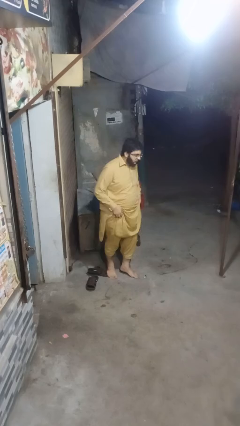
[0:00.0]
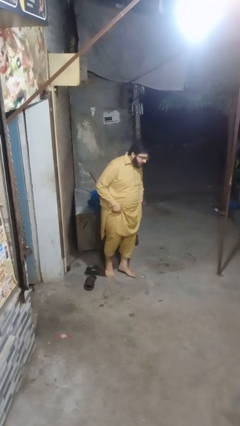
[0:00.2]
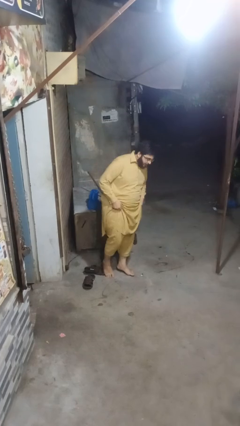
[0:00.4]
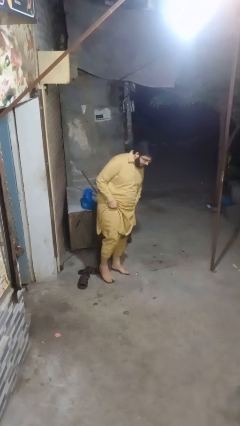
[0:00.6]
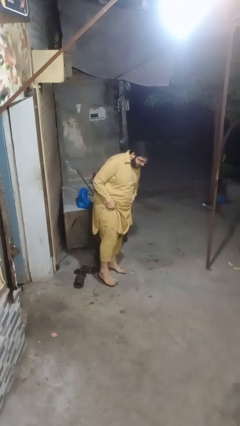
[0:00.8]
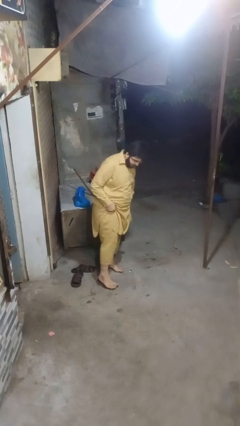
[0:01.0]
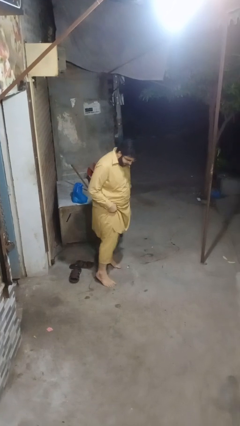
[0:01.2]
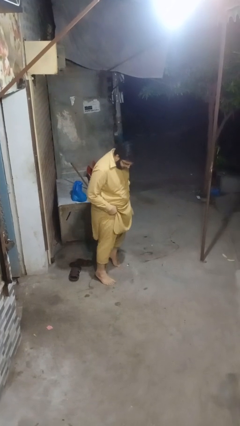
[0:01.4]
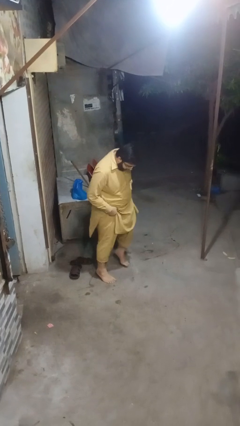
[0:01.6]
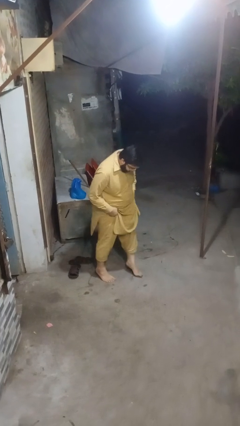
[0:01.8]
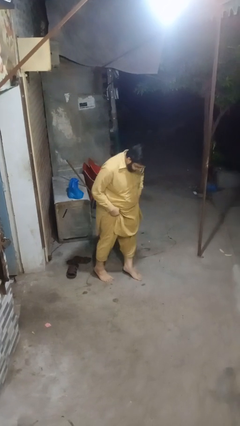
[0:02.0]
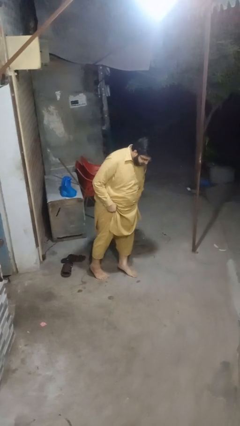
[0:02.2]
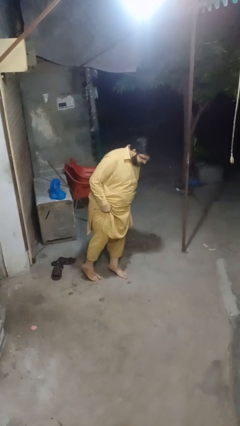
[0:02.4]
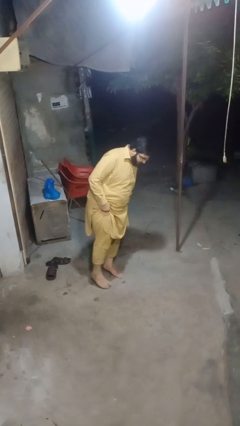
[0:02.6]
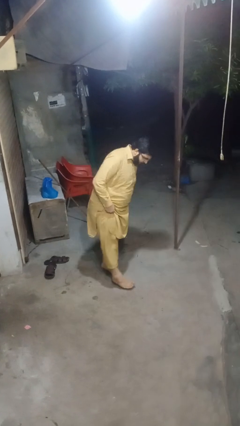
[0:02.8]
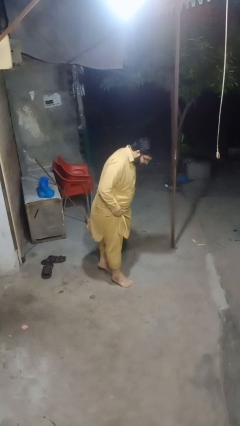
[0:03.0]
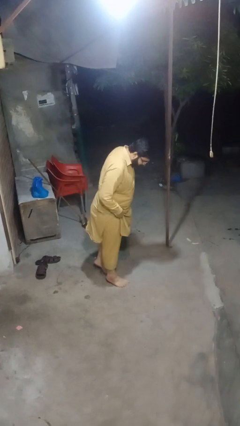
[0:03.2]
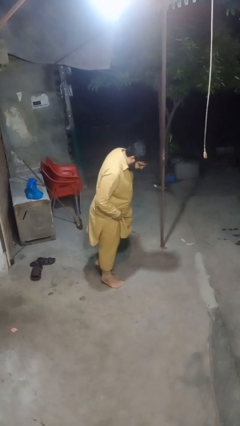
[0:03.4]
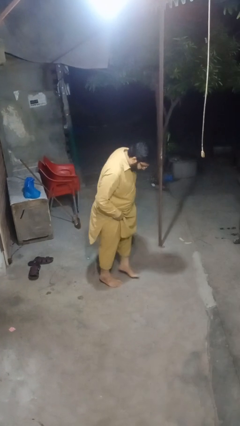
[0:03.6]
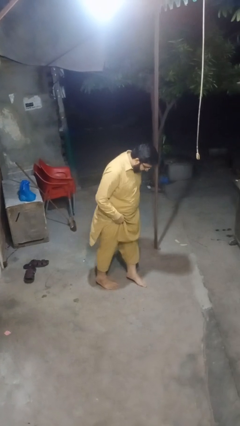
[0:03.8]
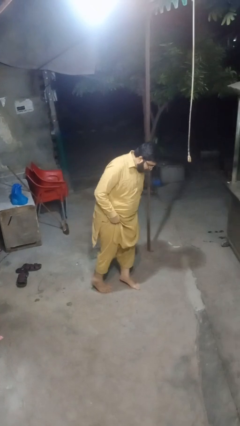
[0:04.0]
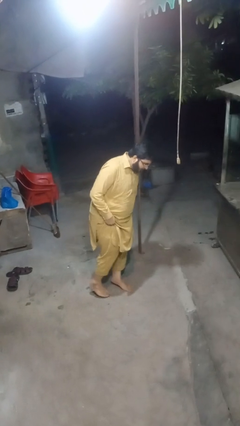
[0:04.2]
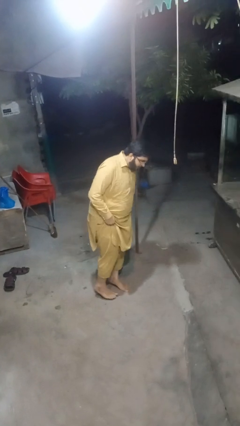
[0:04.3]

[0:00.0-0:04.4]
person walks tiptoe

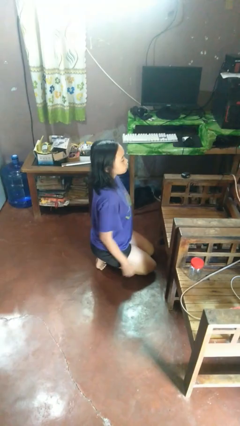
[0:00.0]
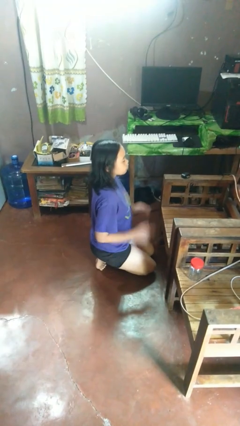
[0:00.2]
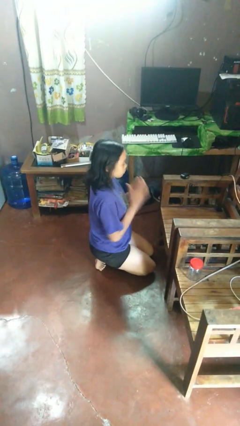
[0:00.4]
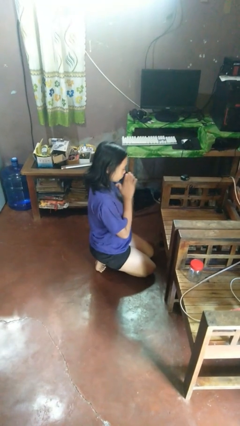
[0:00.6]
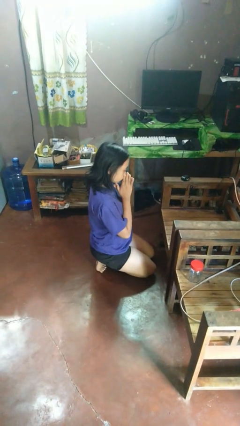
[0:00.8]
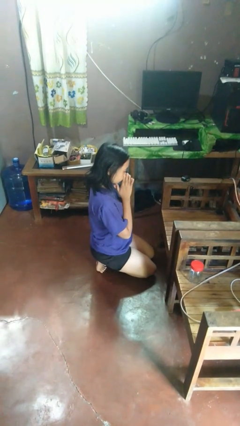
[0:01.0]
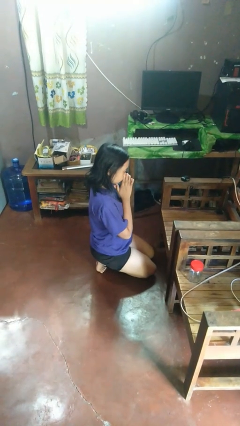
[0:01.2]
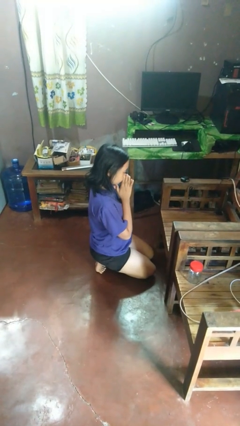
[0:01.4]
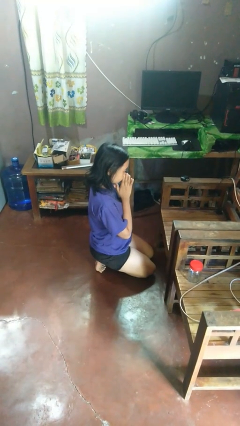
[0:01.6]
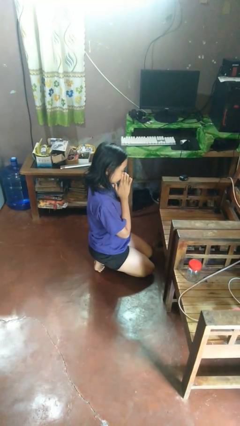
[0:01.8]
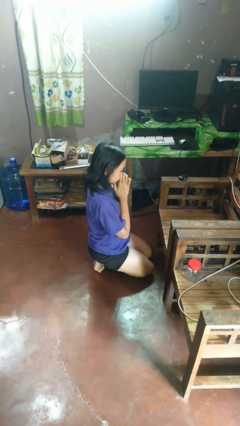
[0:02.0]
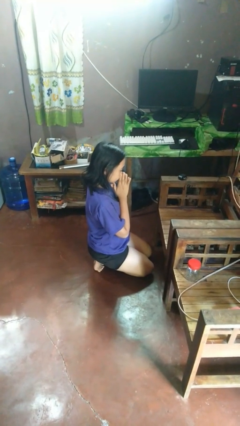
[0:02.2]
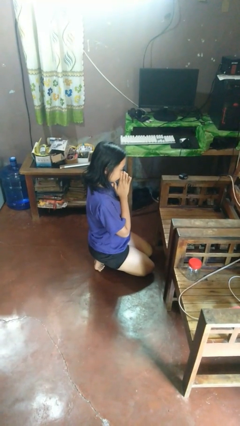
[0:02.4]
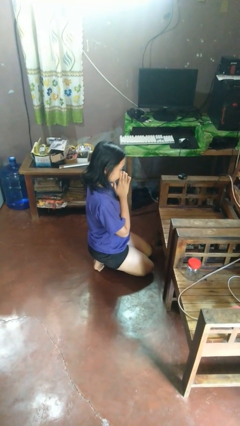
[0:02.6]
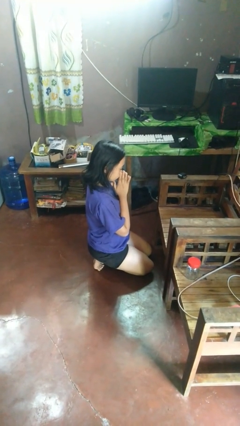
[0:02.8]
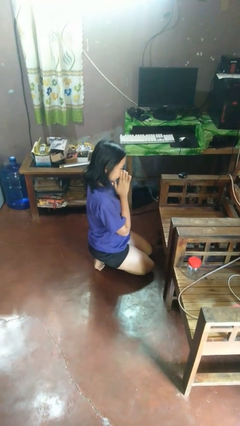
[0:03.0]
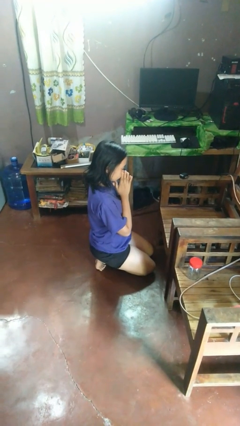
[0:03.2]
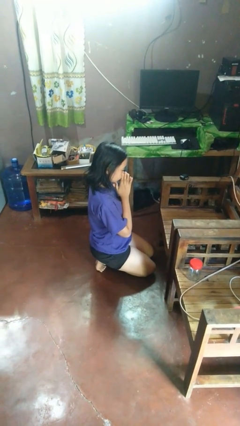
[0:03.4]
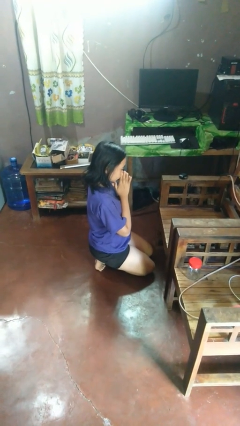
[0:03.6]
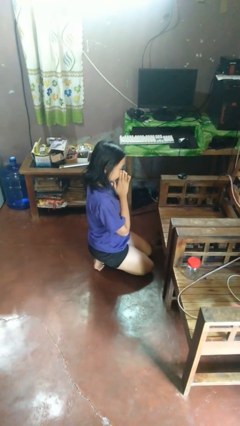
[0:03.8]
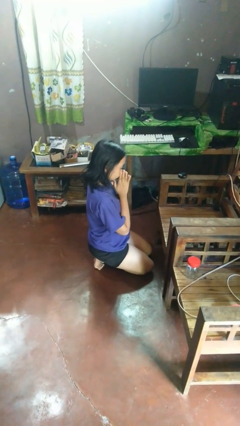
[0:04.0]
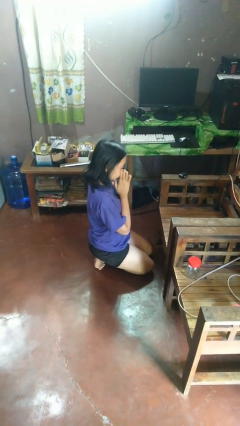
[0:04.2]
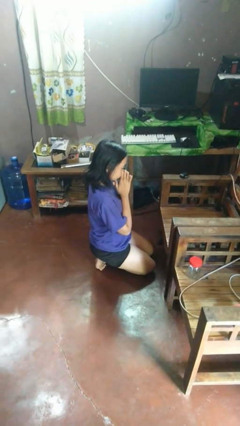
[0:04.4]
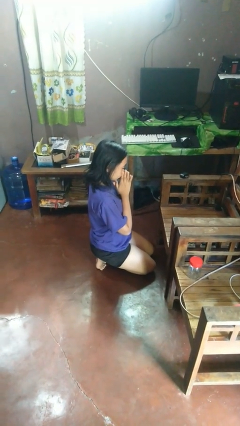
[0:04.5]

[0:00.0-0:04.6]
person prays

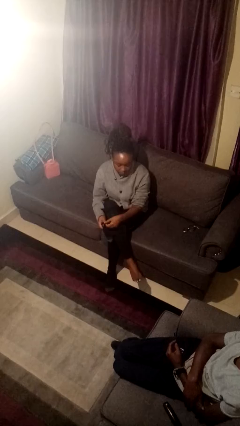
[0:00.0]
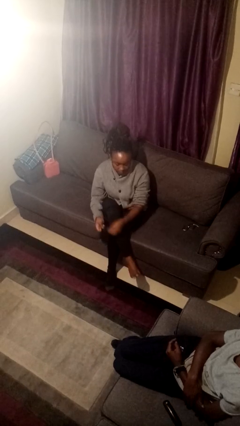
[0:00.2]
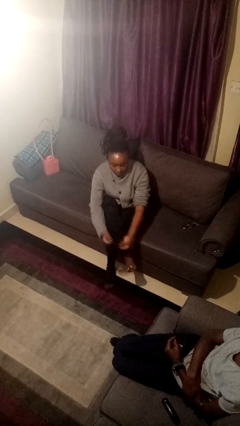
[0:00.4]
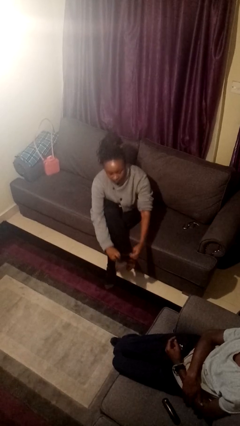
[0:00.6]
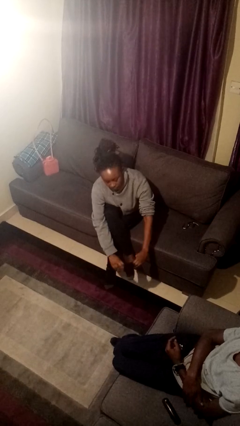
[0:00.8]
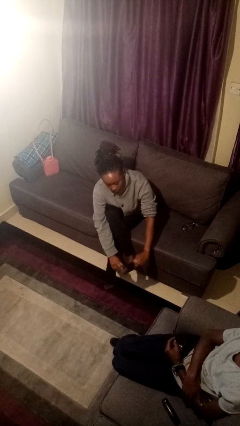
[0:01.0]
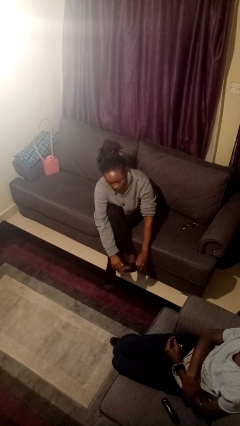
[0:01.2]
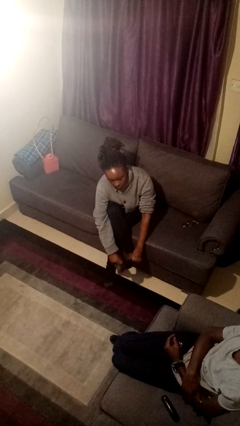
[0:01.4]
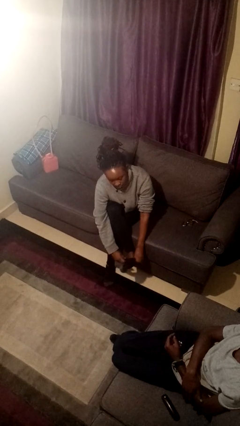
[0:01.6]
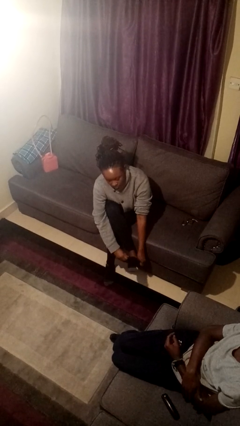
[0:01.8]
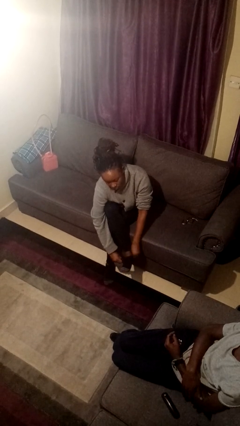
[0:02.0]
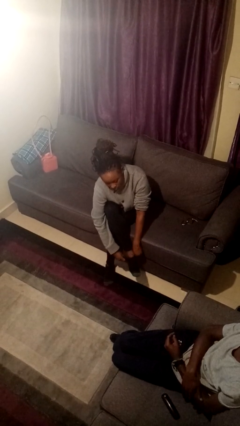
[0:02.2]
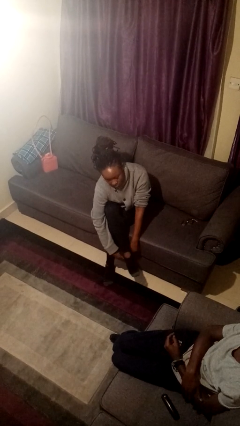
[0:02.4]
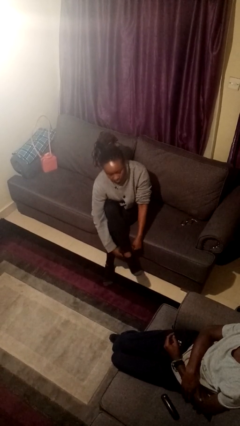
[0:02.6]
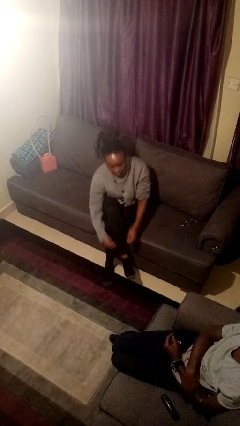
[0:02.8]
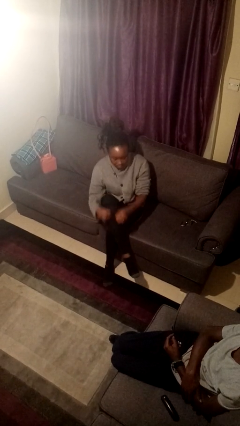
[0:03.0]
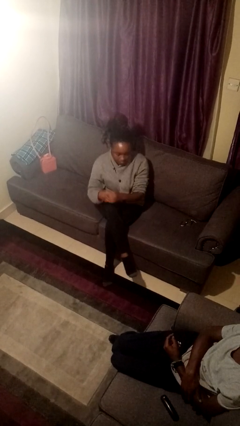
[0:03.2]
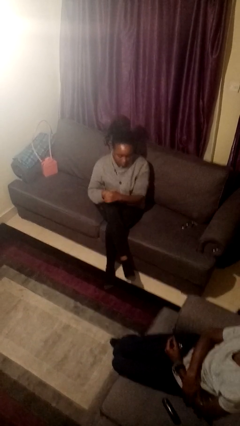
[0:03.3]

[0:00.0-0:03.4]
person puts on socks

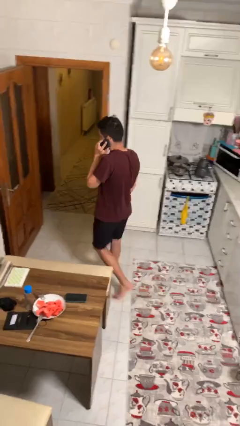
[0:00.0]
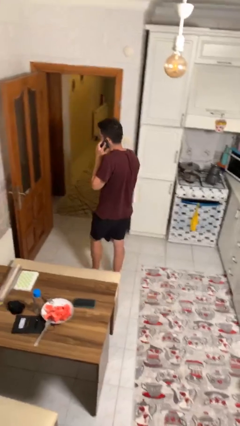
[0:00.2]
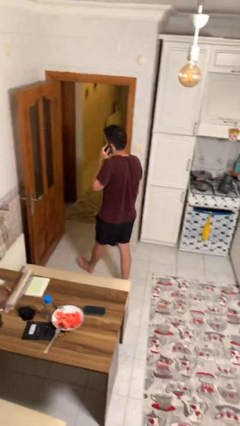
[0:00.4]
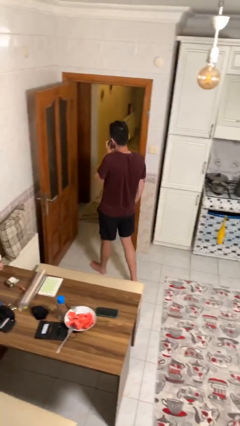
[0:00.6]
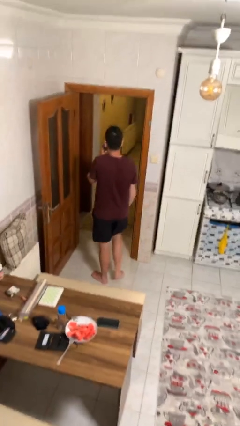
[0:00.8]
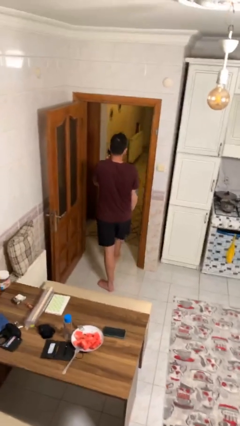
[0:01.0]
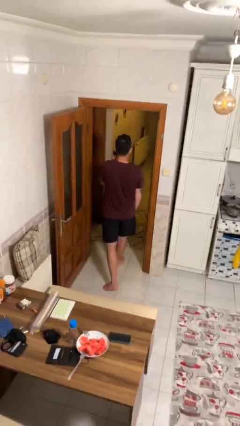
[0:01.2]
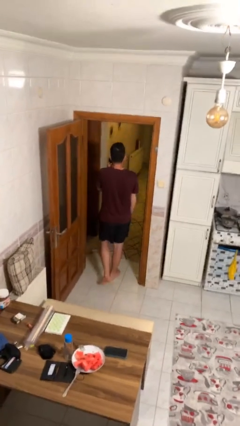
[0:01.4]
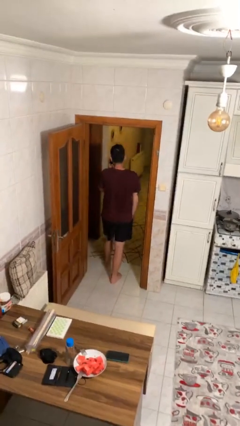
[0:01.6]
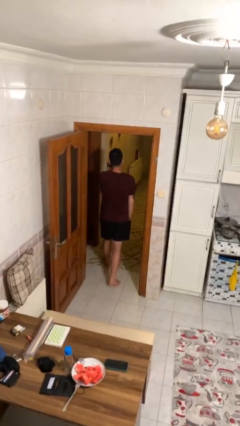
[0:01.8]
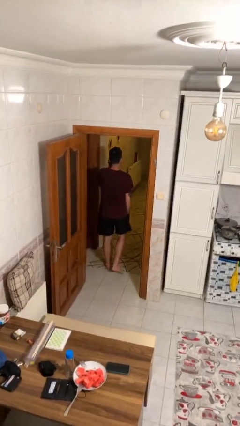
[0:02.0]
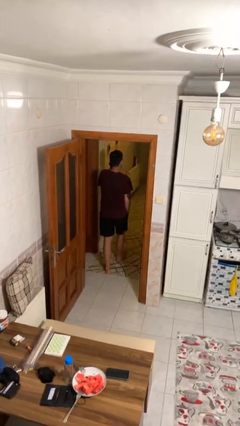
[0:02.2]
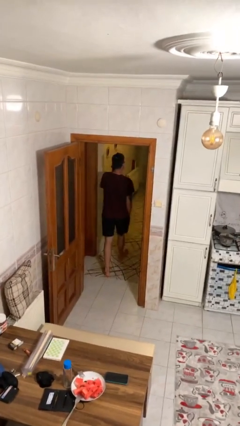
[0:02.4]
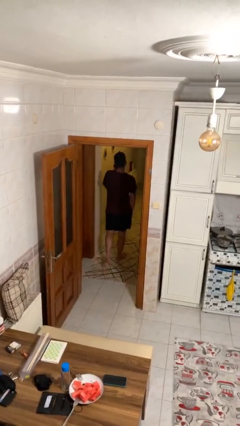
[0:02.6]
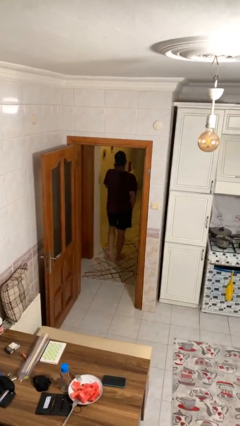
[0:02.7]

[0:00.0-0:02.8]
person exits scene through structure

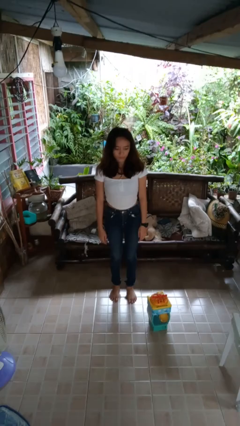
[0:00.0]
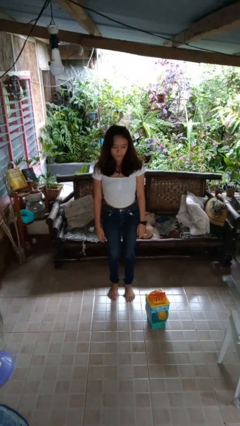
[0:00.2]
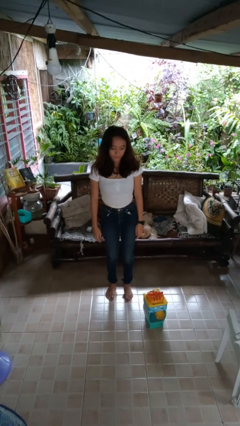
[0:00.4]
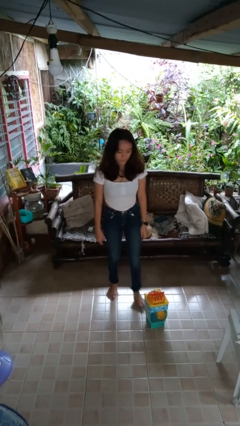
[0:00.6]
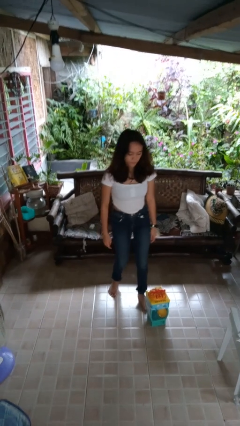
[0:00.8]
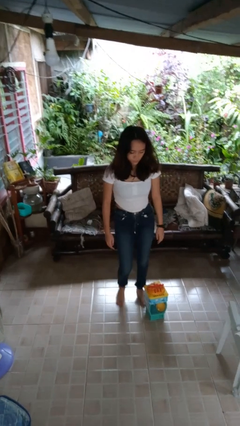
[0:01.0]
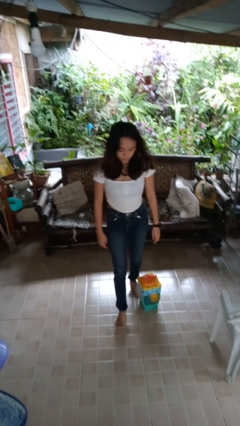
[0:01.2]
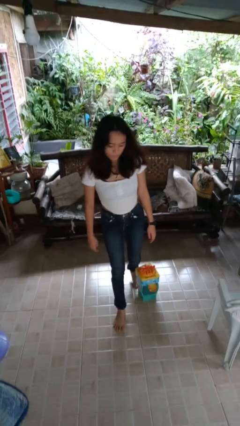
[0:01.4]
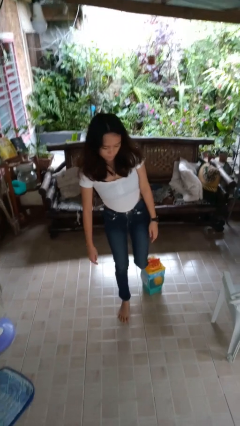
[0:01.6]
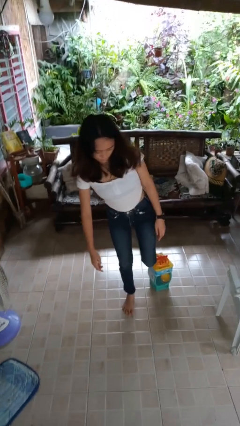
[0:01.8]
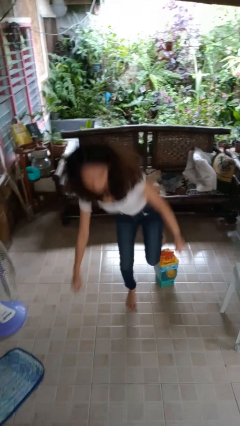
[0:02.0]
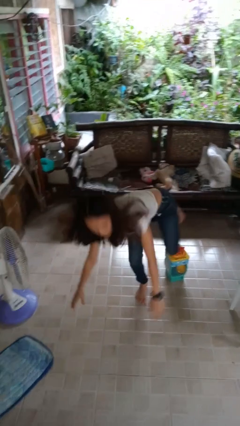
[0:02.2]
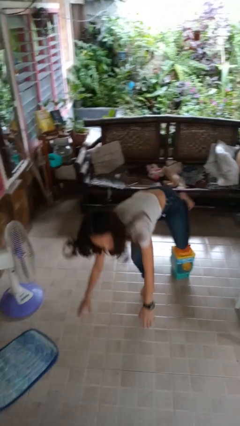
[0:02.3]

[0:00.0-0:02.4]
person trips on object on floor

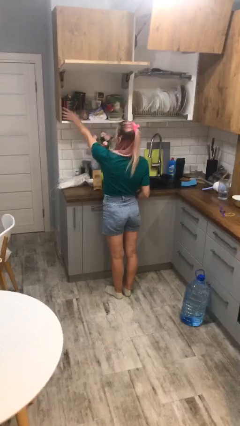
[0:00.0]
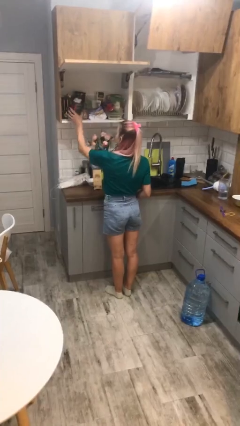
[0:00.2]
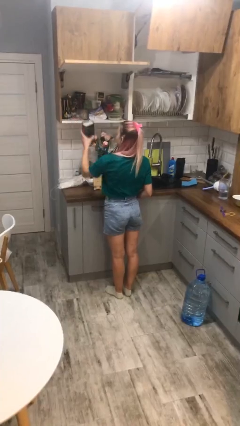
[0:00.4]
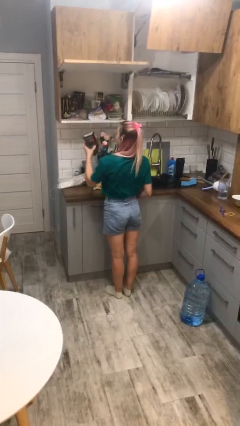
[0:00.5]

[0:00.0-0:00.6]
person picks up object from cabinet
